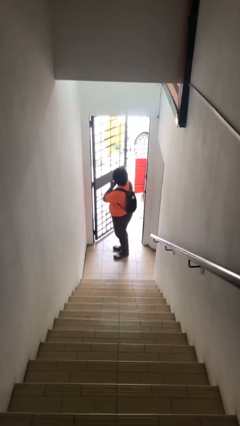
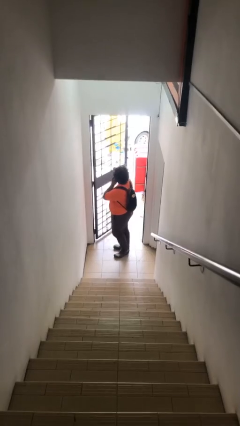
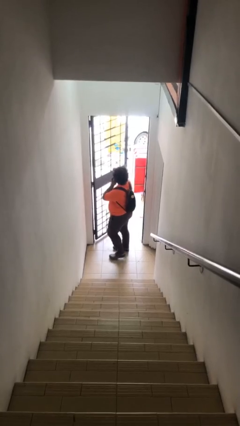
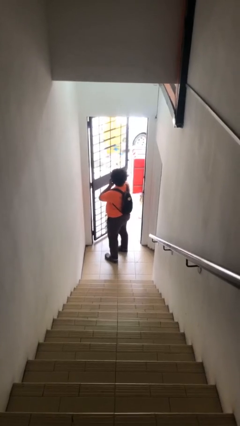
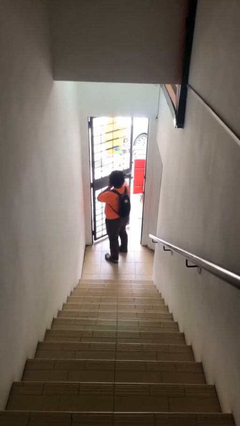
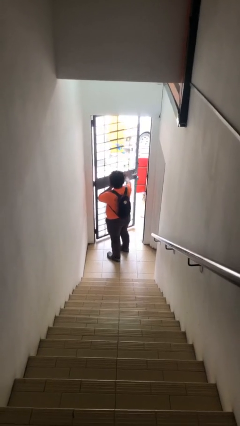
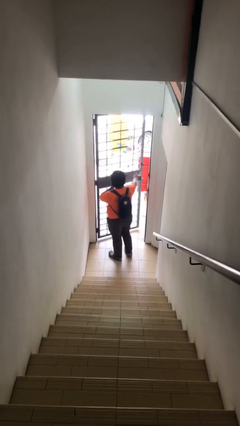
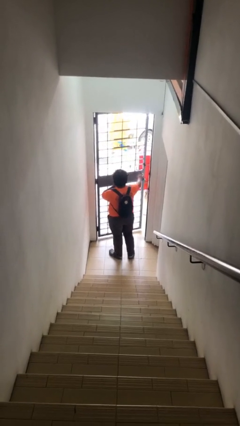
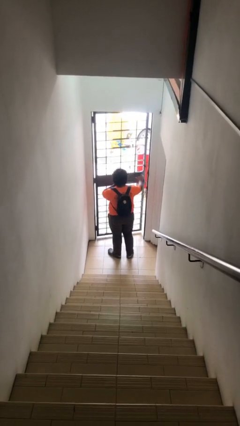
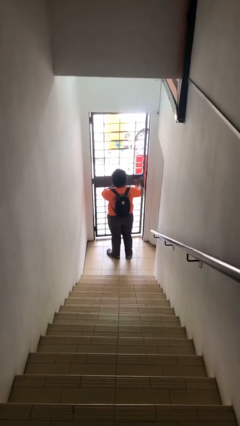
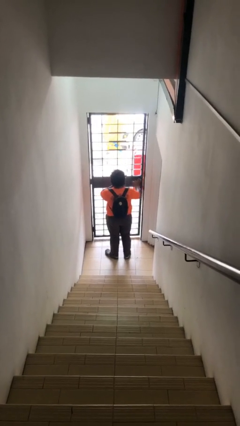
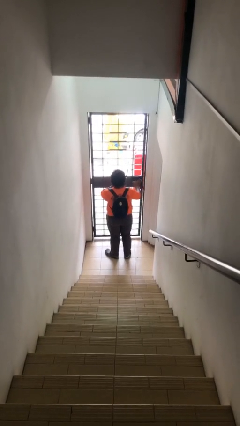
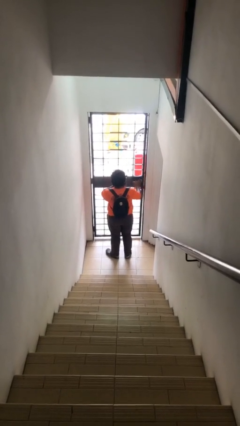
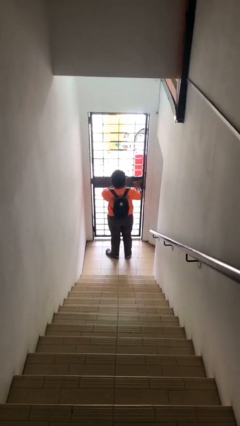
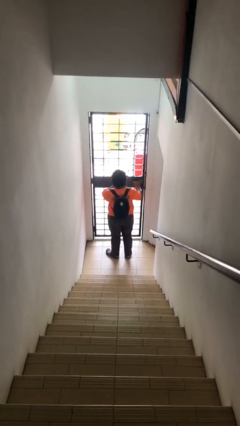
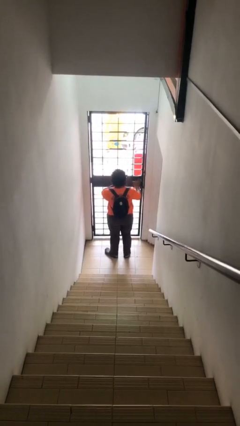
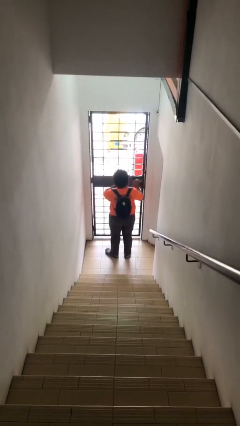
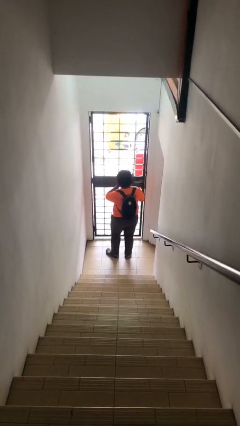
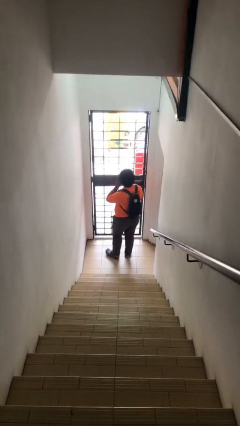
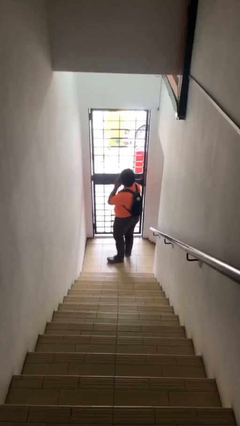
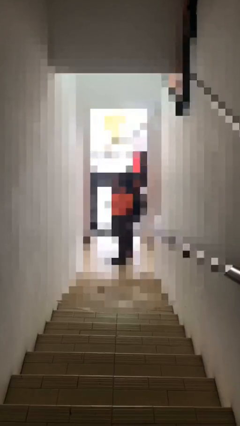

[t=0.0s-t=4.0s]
person closes facility door

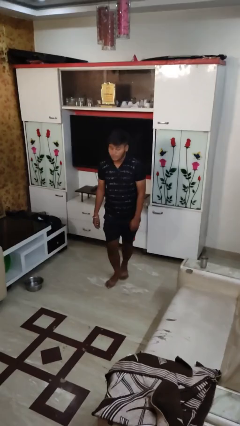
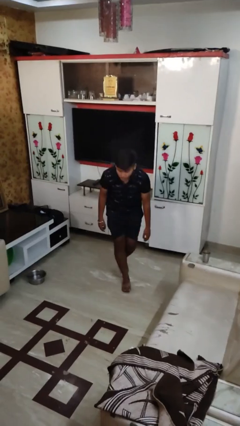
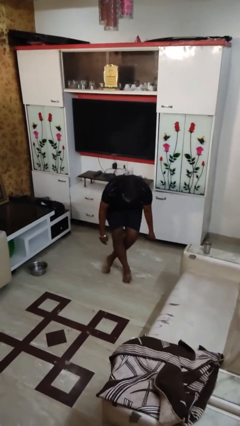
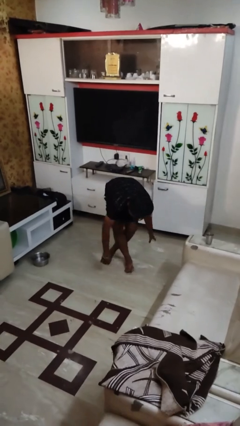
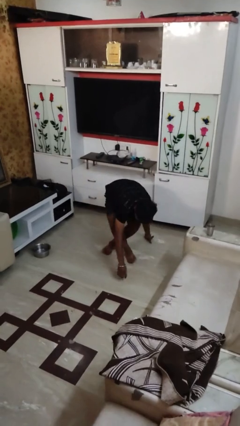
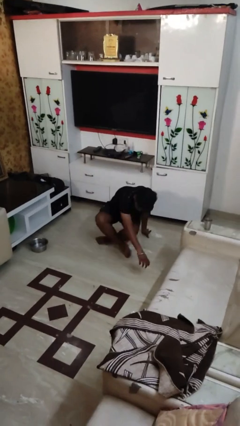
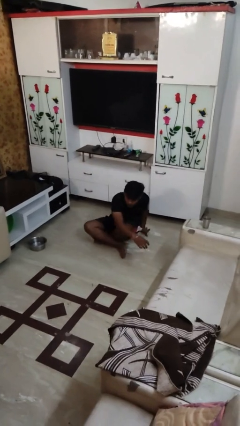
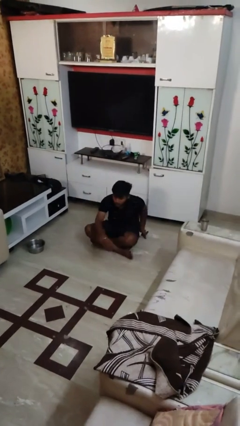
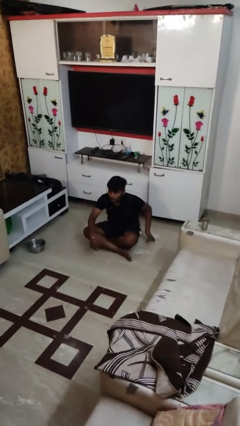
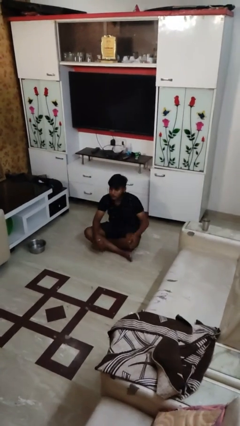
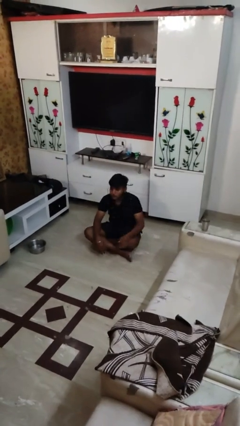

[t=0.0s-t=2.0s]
person sits crisscross

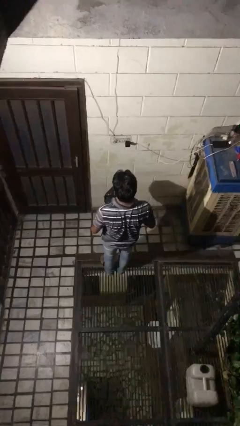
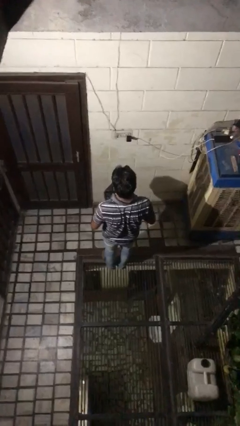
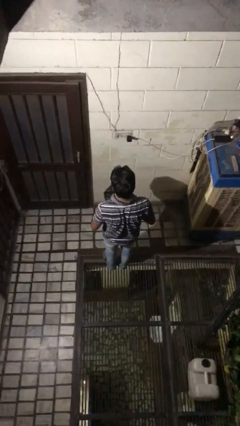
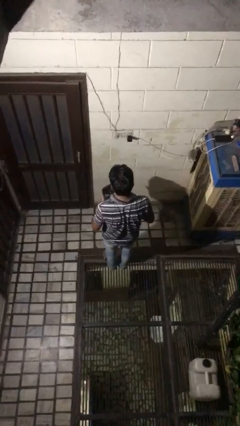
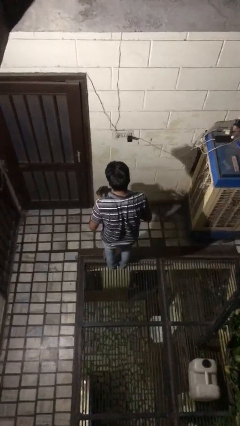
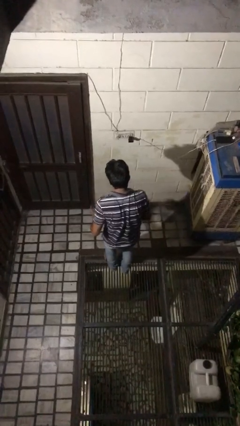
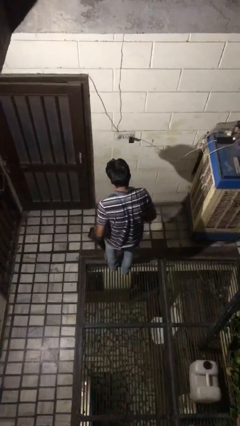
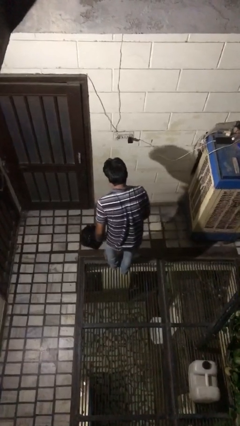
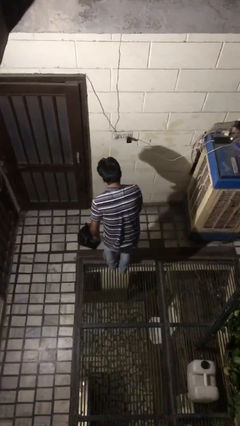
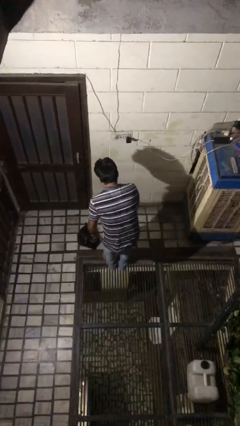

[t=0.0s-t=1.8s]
person throws object to ground

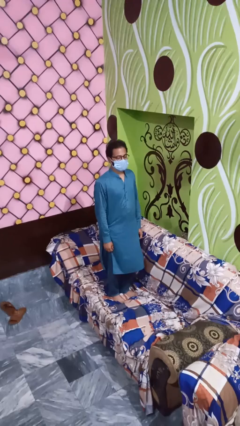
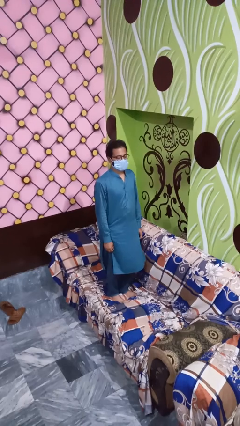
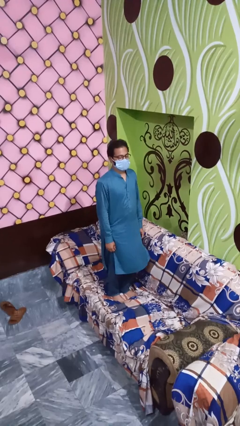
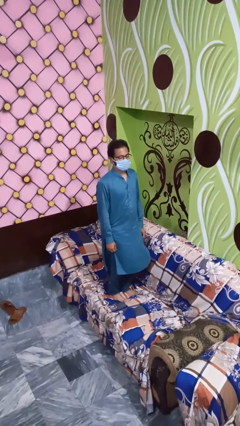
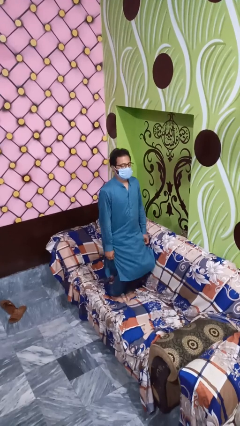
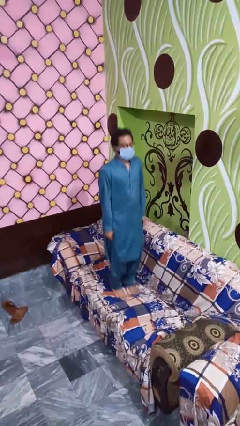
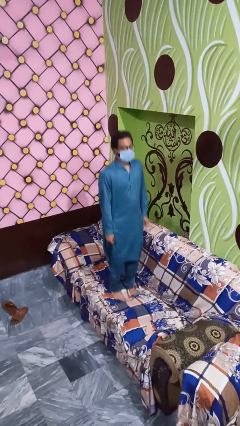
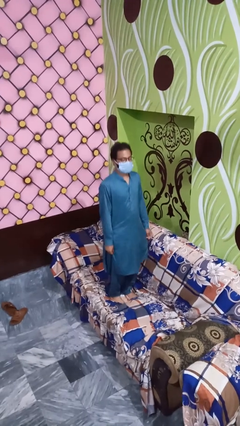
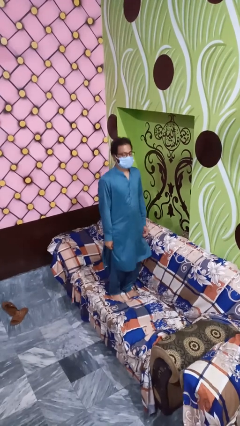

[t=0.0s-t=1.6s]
person jumps on couch

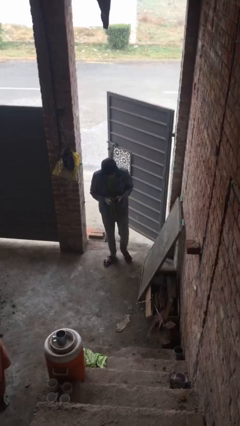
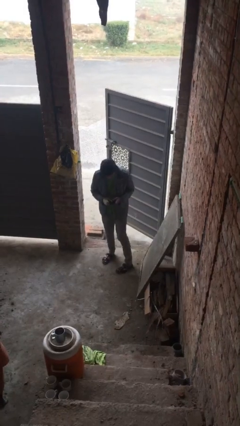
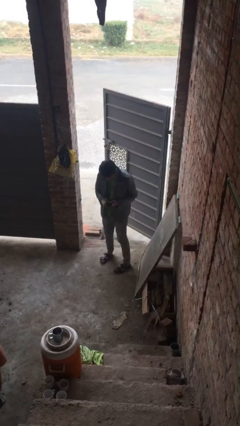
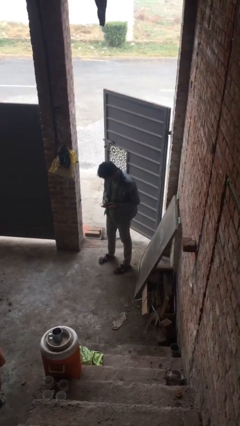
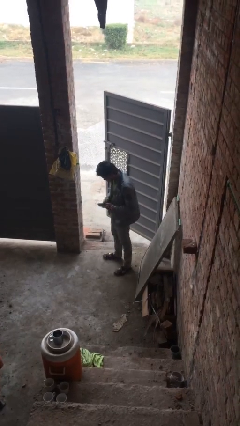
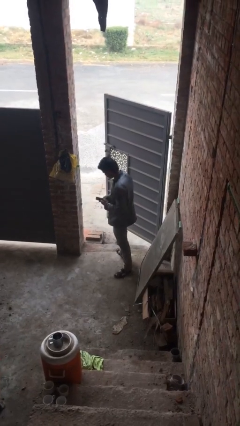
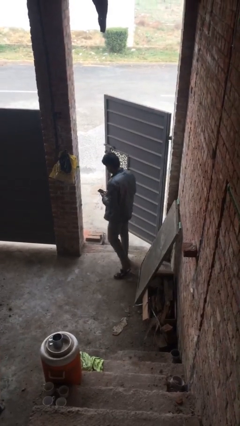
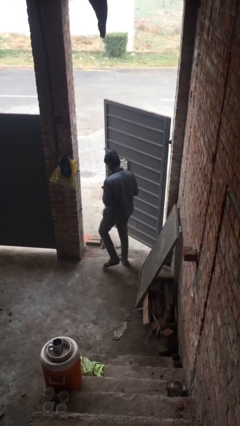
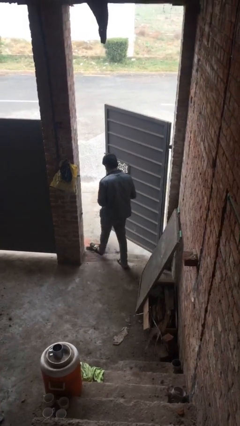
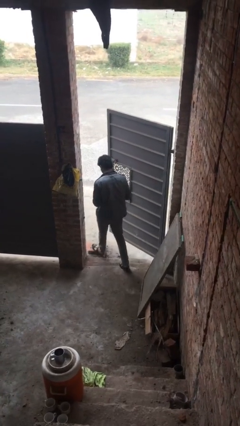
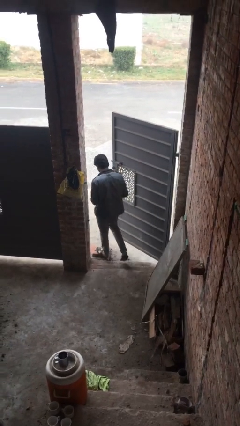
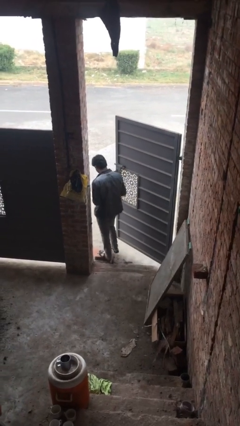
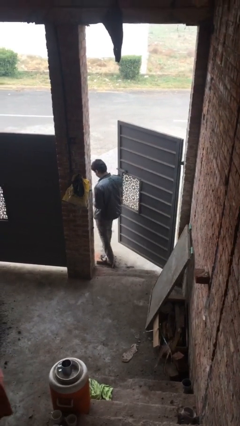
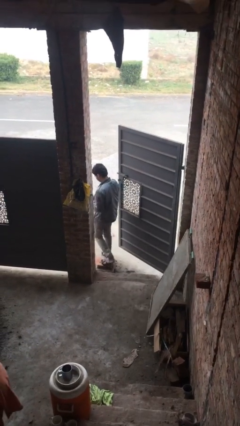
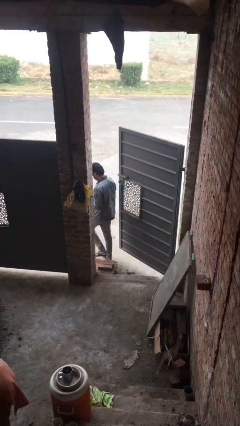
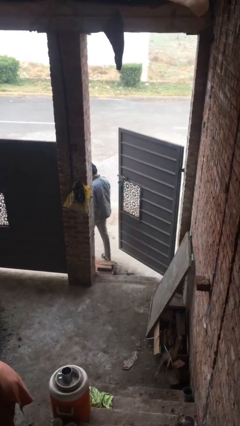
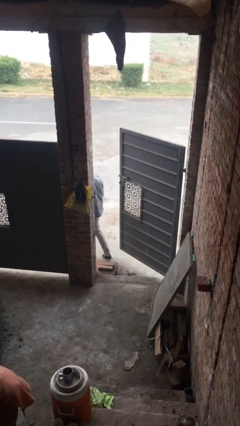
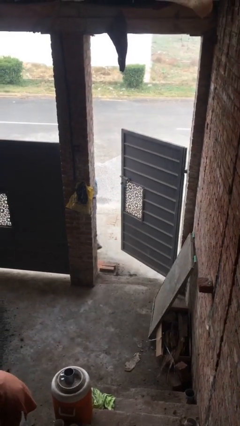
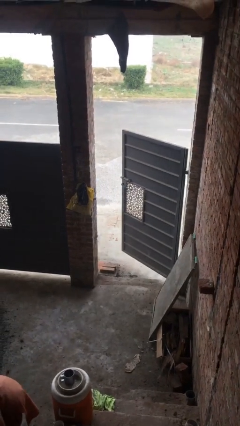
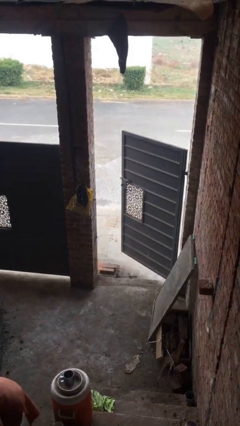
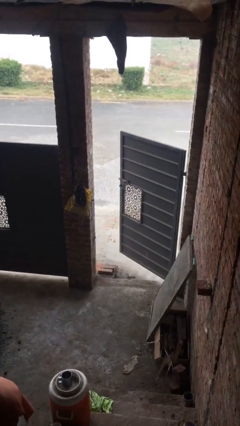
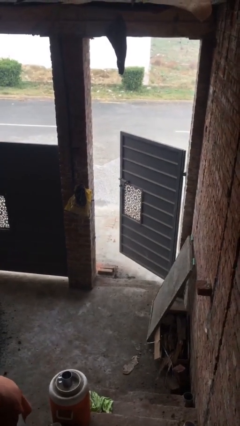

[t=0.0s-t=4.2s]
person exits scene through structure

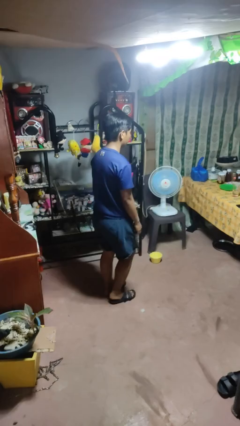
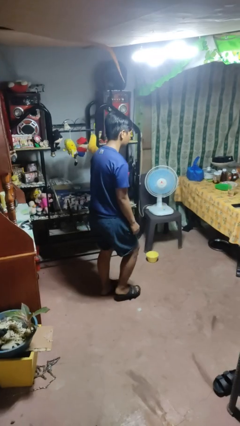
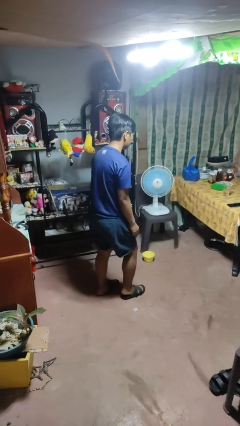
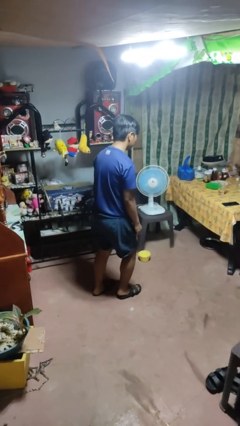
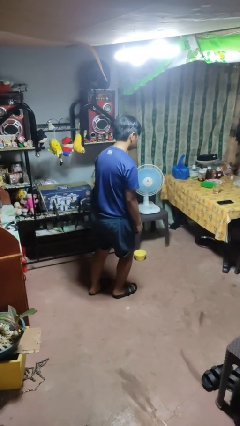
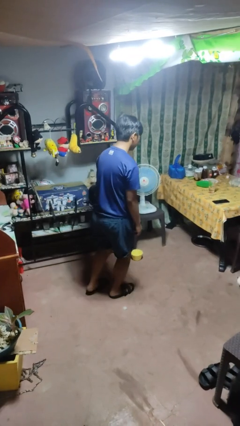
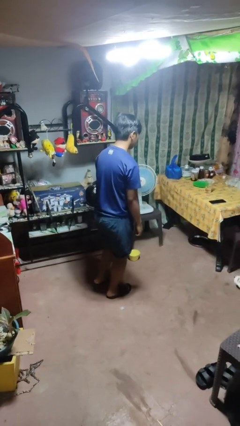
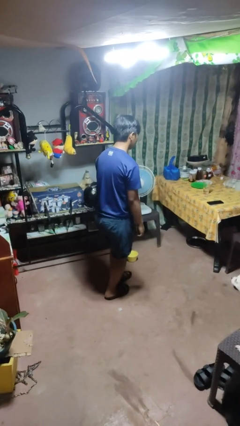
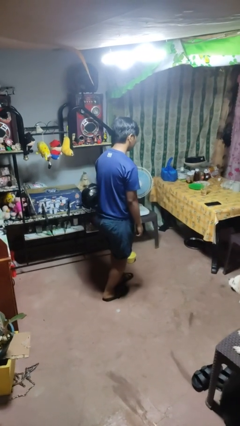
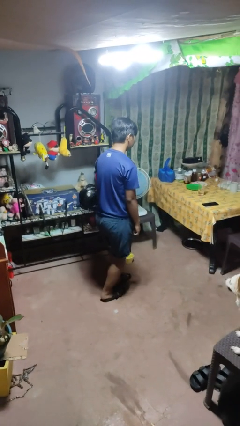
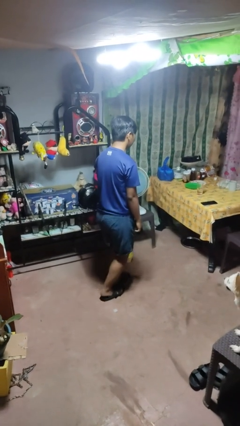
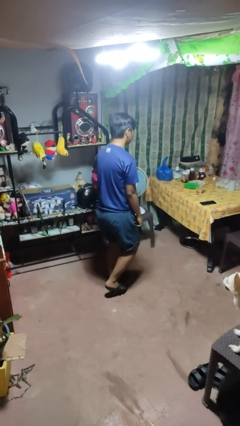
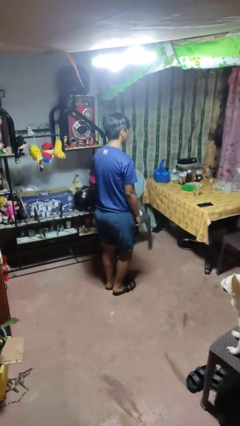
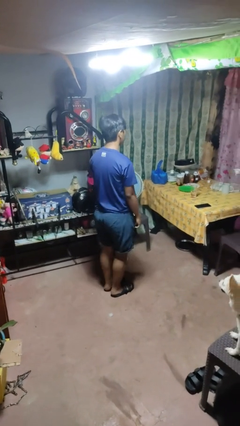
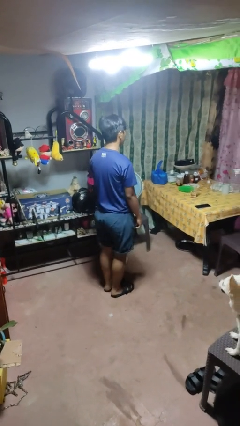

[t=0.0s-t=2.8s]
person walks tiptoe

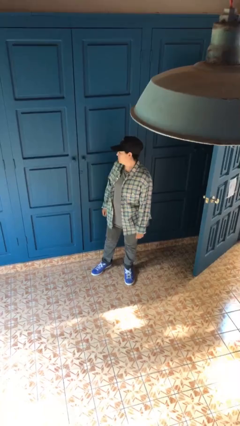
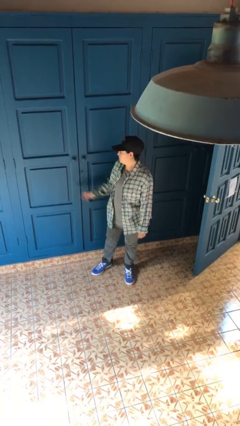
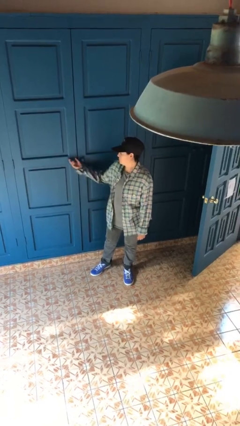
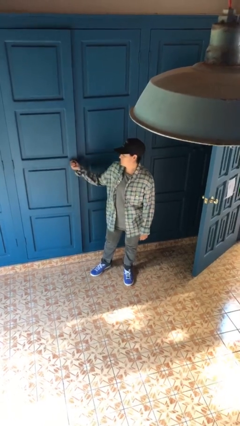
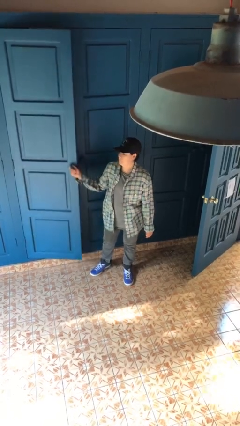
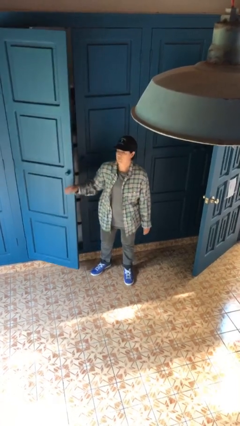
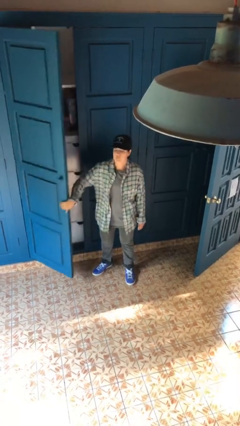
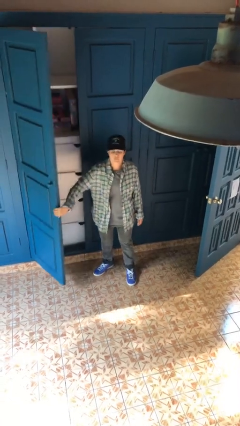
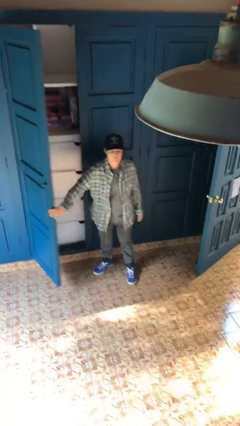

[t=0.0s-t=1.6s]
person opens closet door
